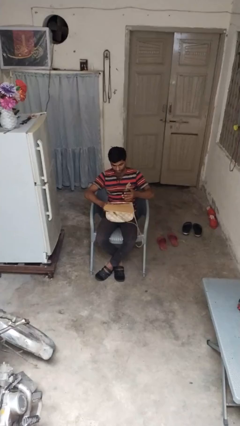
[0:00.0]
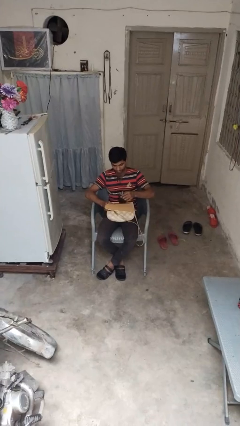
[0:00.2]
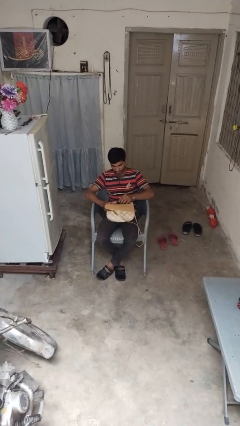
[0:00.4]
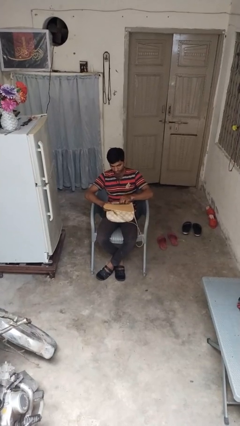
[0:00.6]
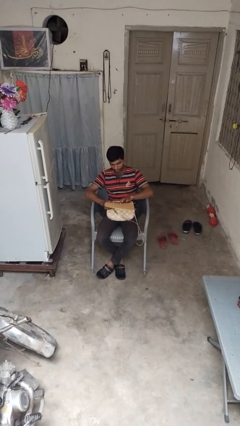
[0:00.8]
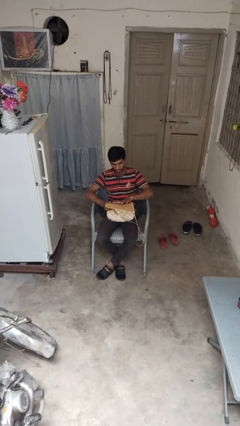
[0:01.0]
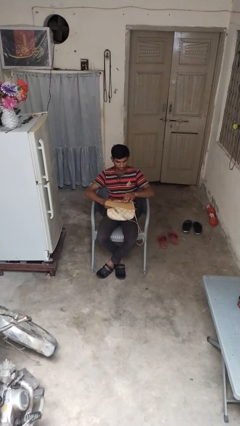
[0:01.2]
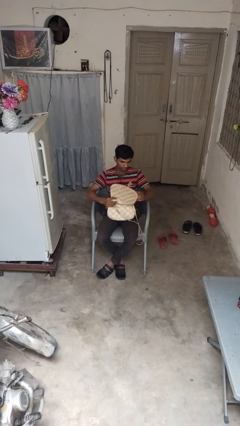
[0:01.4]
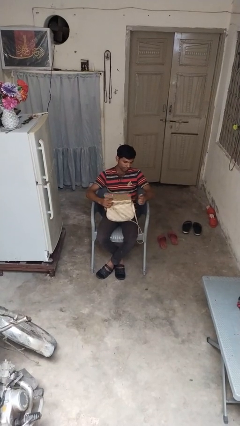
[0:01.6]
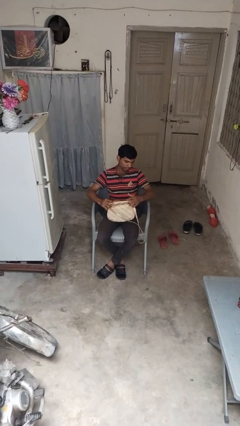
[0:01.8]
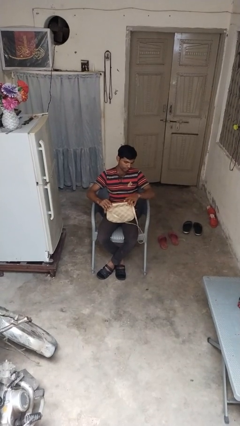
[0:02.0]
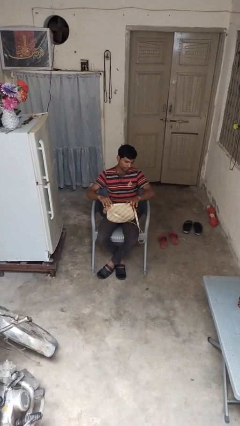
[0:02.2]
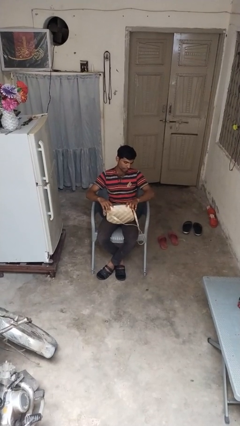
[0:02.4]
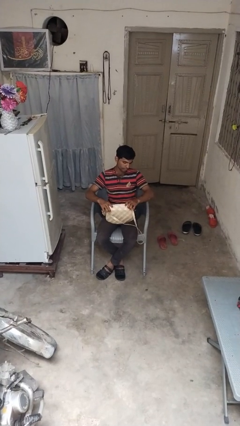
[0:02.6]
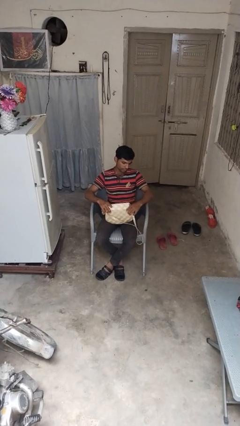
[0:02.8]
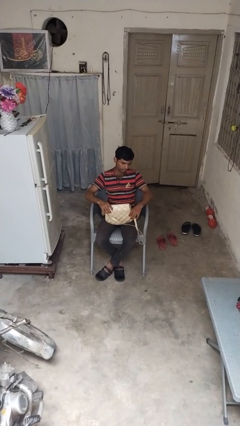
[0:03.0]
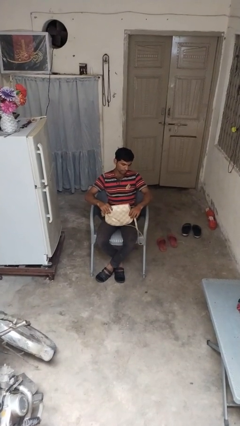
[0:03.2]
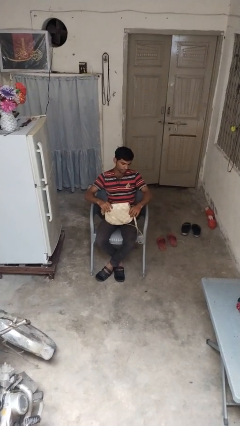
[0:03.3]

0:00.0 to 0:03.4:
person puts object into purse

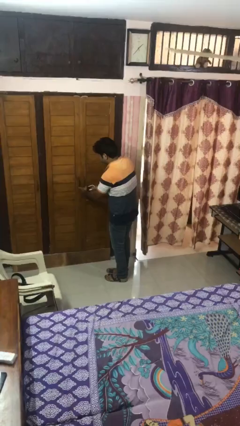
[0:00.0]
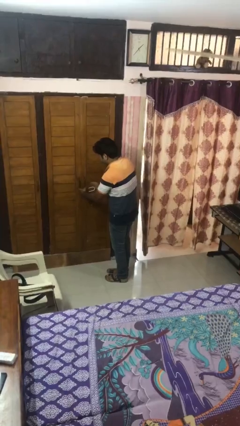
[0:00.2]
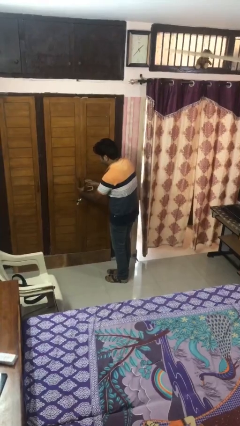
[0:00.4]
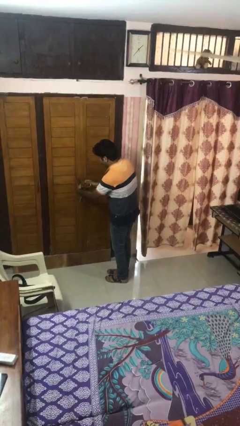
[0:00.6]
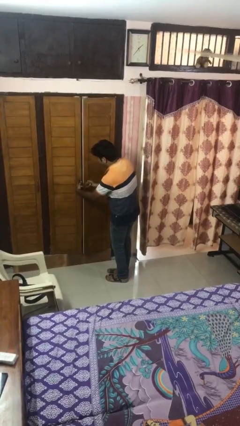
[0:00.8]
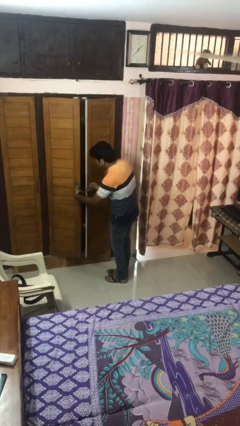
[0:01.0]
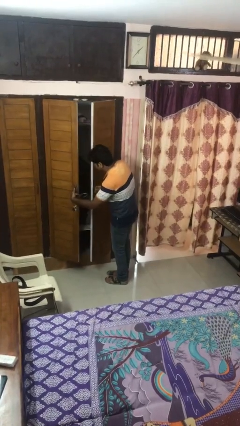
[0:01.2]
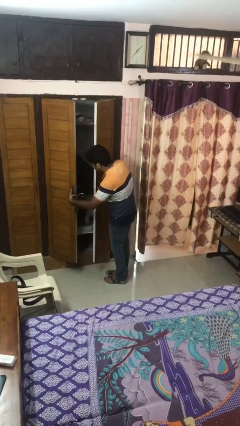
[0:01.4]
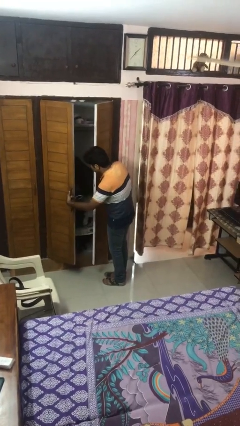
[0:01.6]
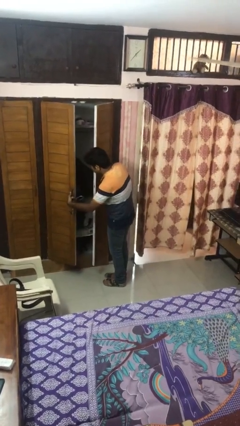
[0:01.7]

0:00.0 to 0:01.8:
person opens facility door

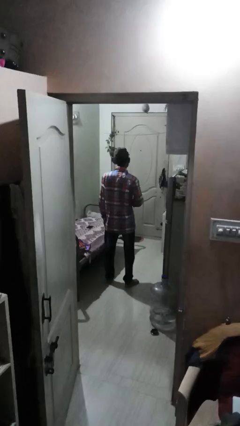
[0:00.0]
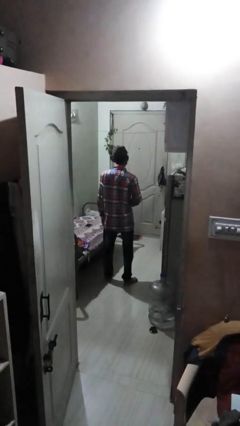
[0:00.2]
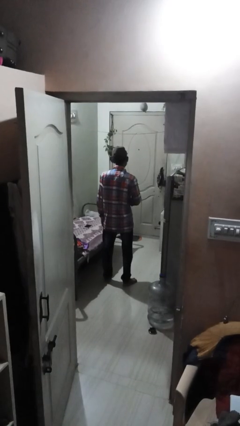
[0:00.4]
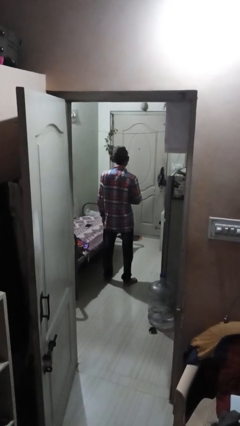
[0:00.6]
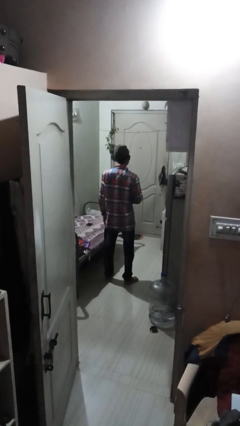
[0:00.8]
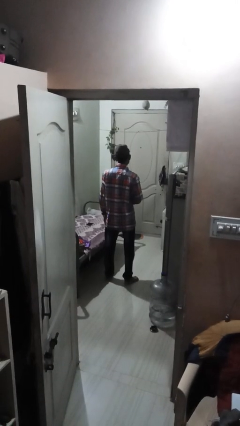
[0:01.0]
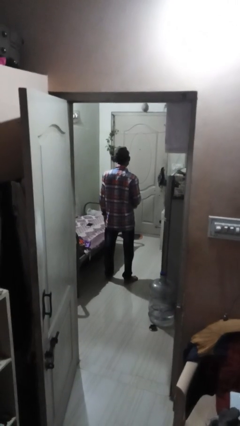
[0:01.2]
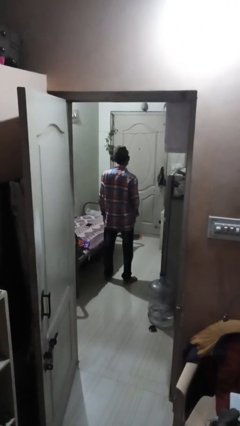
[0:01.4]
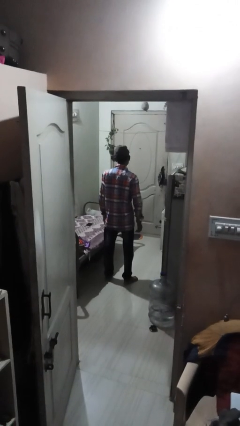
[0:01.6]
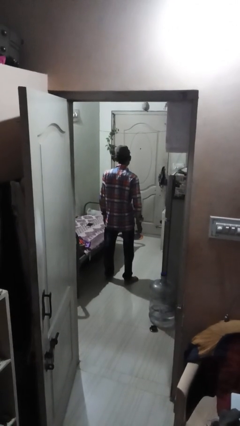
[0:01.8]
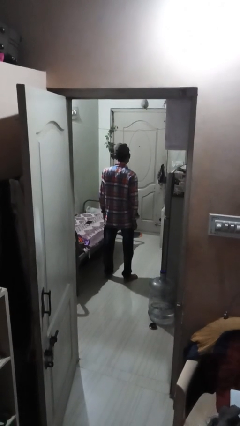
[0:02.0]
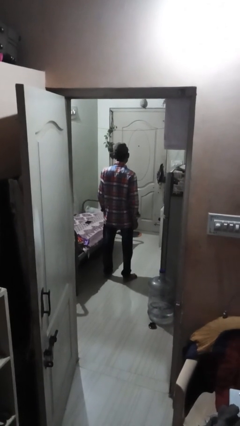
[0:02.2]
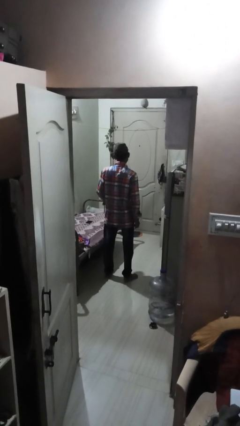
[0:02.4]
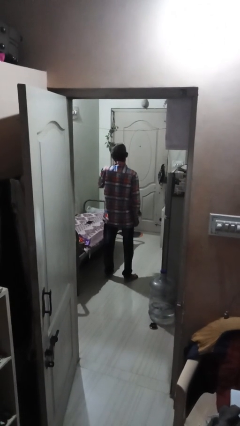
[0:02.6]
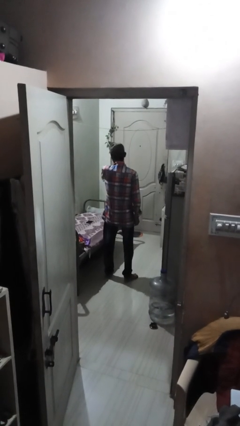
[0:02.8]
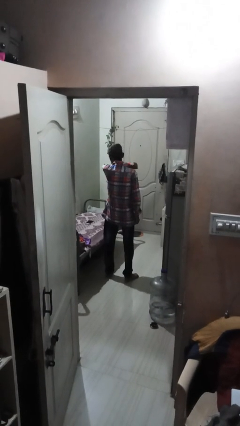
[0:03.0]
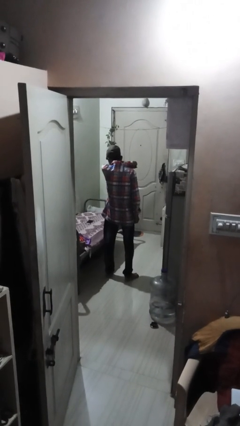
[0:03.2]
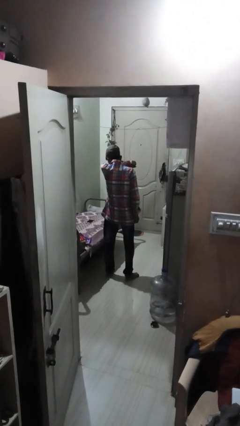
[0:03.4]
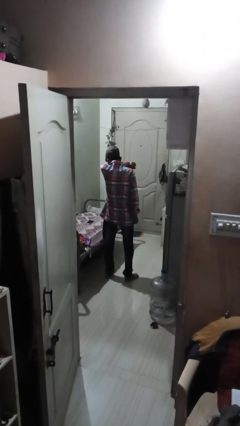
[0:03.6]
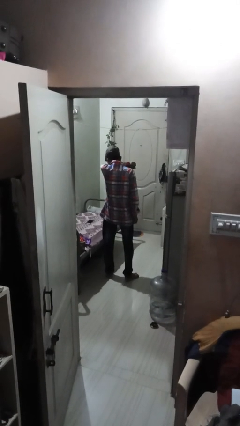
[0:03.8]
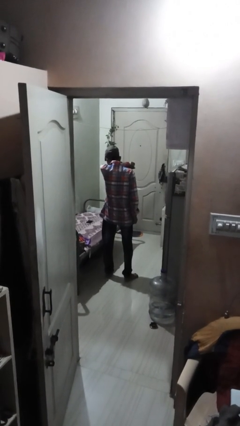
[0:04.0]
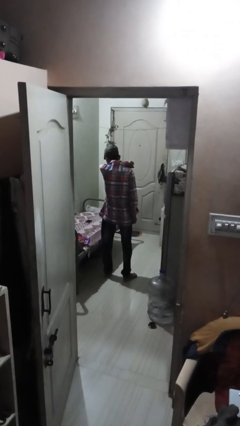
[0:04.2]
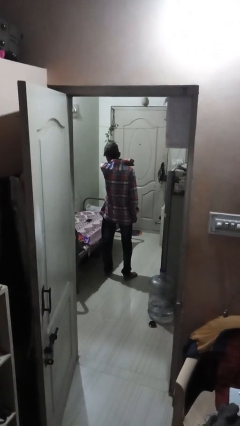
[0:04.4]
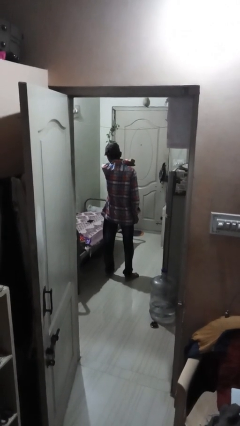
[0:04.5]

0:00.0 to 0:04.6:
person sneezes into arm

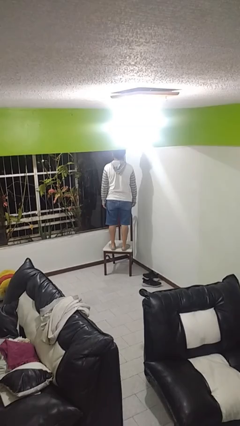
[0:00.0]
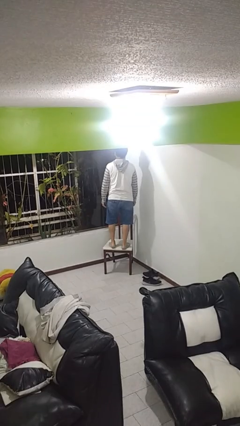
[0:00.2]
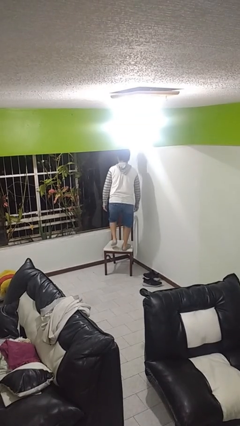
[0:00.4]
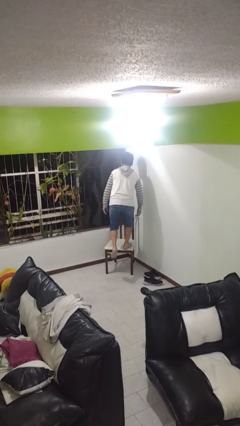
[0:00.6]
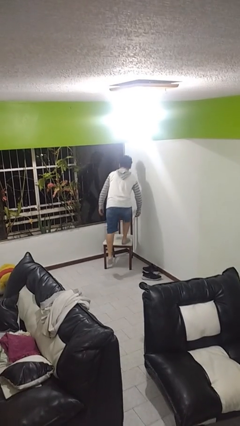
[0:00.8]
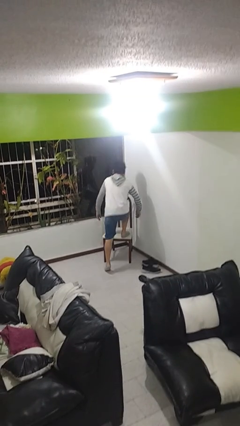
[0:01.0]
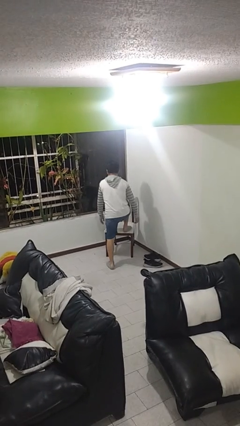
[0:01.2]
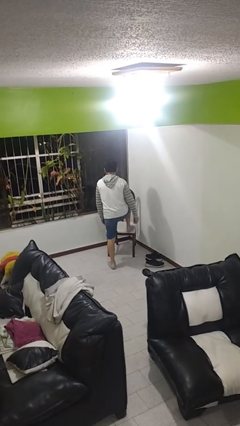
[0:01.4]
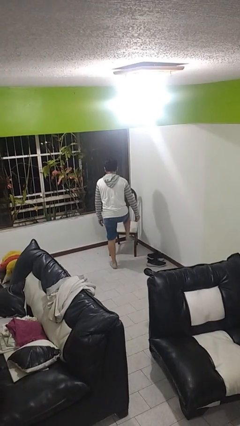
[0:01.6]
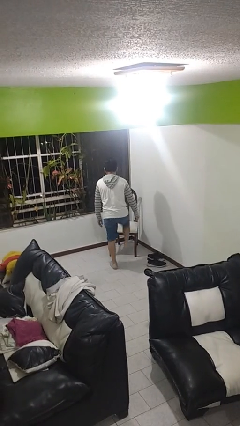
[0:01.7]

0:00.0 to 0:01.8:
person climbs off chair

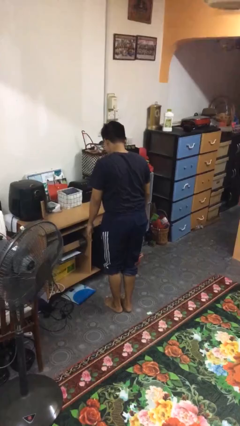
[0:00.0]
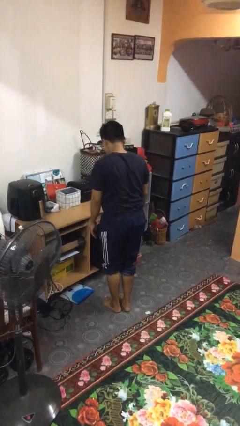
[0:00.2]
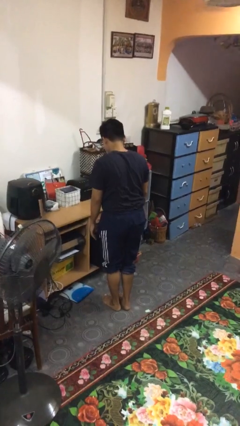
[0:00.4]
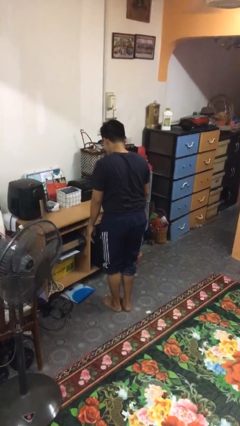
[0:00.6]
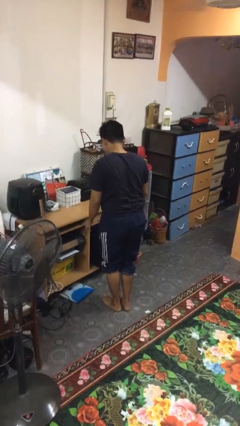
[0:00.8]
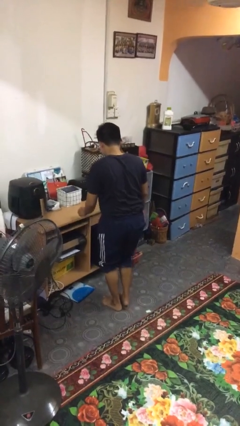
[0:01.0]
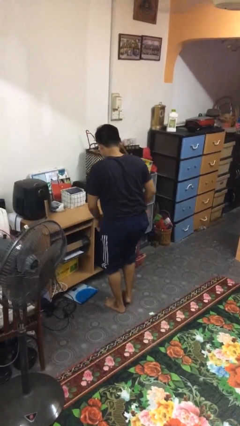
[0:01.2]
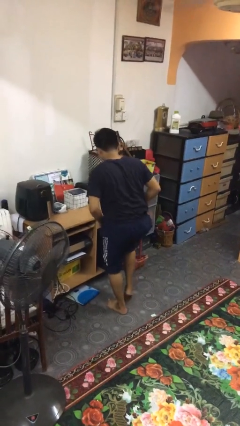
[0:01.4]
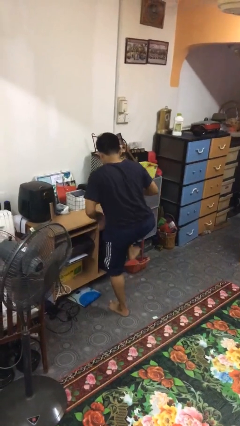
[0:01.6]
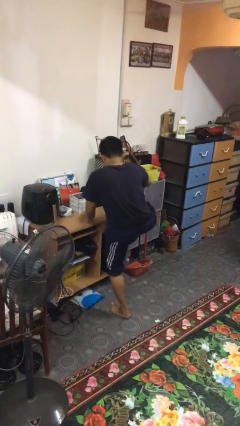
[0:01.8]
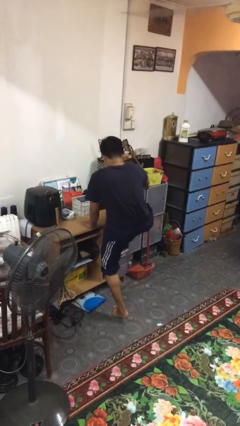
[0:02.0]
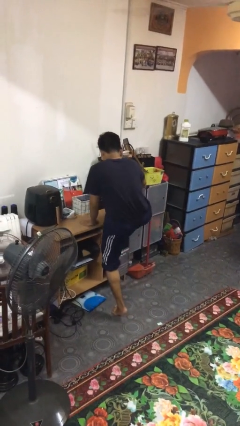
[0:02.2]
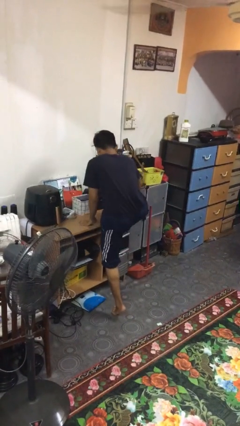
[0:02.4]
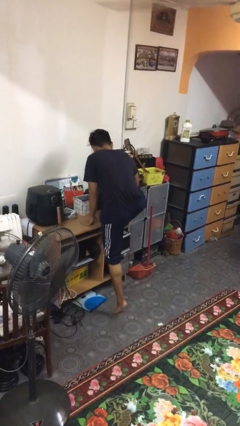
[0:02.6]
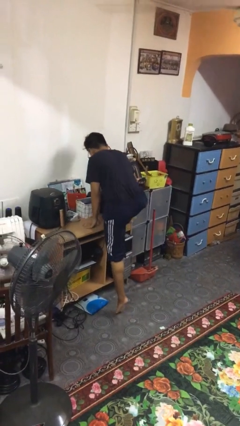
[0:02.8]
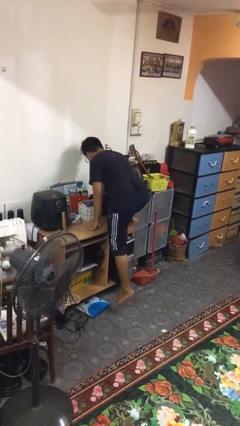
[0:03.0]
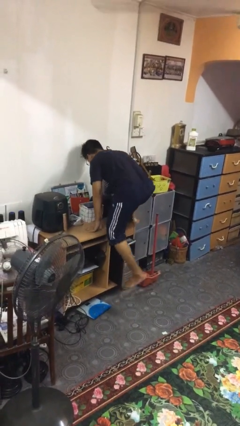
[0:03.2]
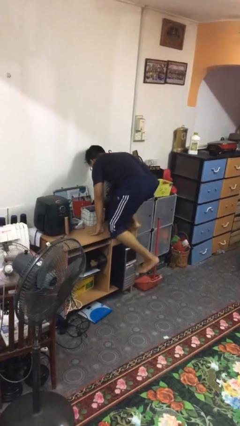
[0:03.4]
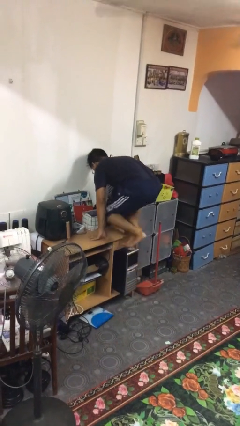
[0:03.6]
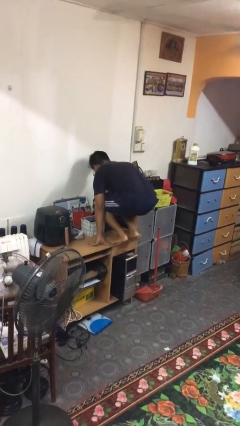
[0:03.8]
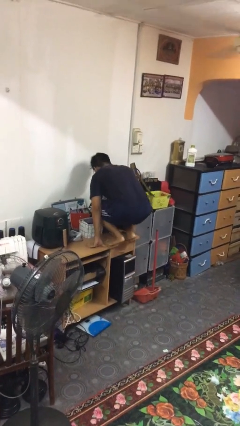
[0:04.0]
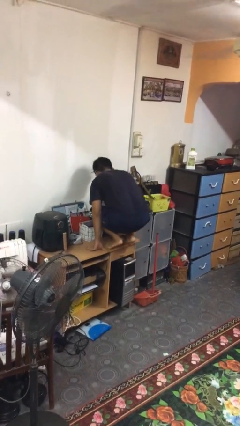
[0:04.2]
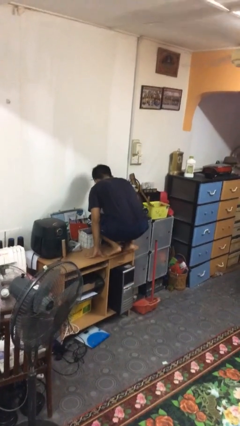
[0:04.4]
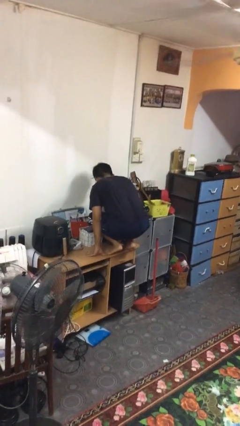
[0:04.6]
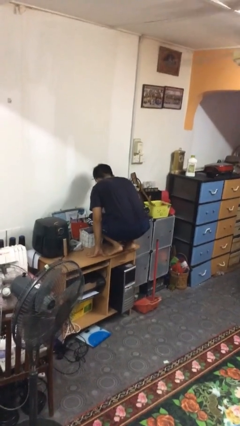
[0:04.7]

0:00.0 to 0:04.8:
person climbs on table

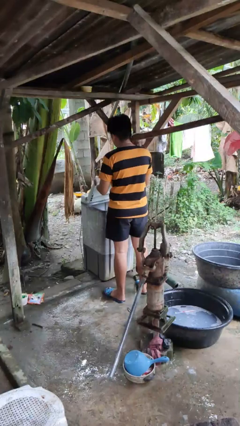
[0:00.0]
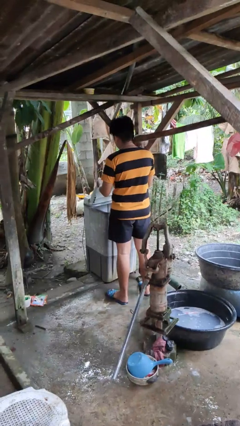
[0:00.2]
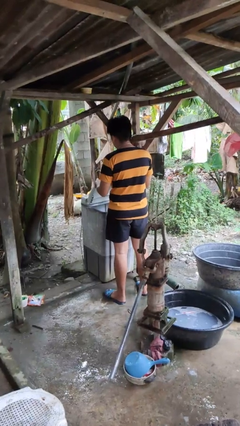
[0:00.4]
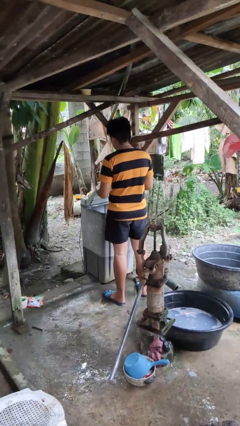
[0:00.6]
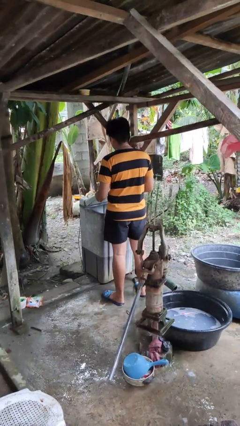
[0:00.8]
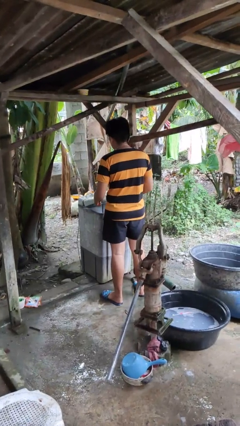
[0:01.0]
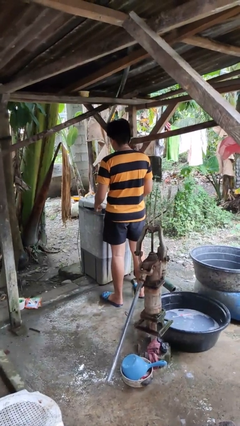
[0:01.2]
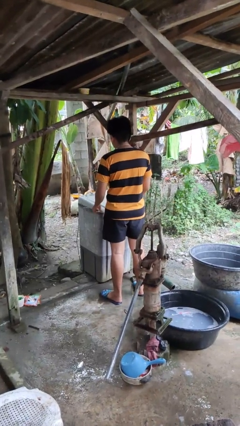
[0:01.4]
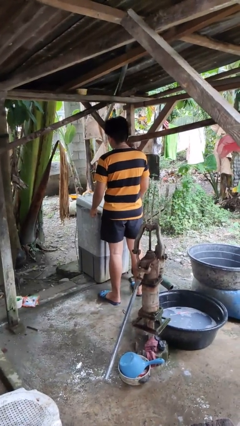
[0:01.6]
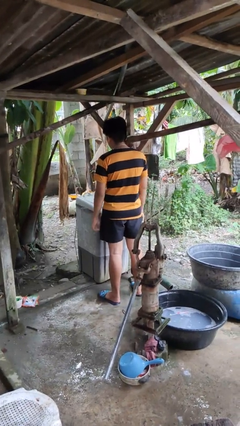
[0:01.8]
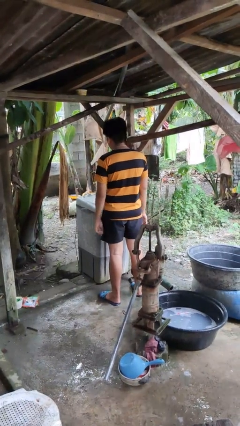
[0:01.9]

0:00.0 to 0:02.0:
person closes clothes washer
